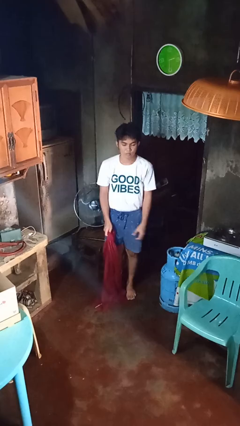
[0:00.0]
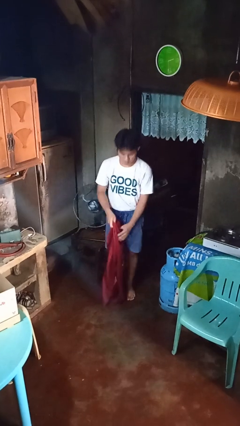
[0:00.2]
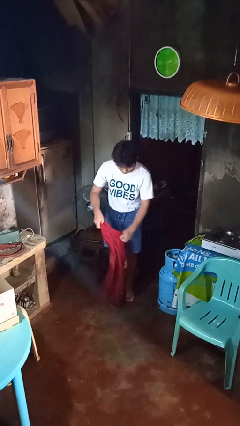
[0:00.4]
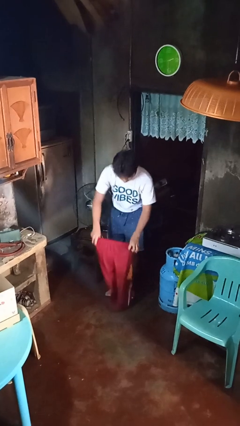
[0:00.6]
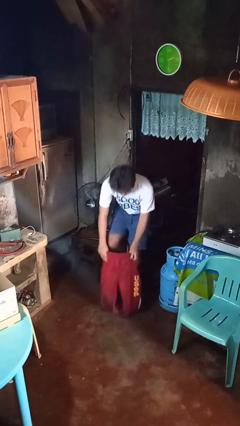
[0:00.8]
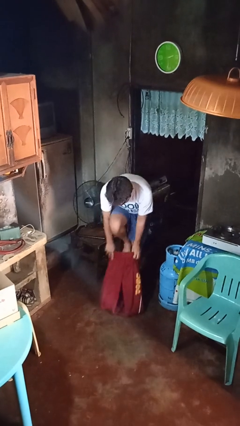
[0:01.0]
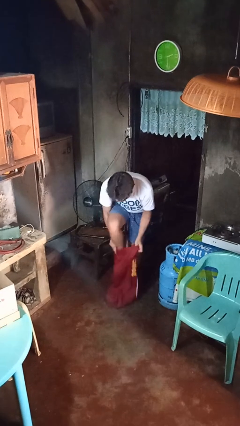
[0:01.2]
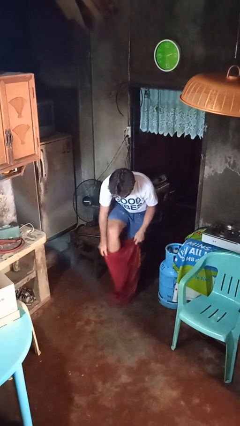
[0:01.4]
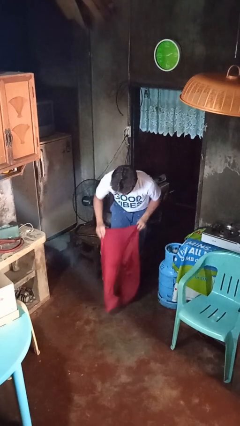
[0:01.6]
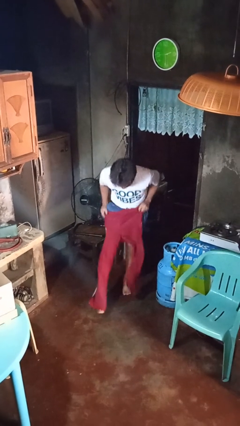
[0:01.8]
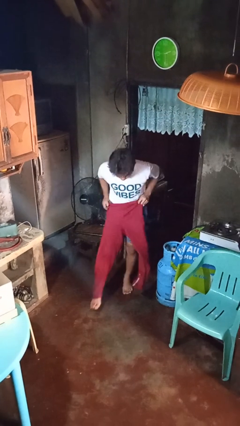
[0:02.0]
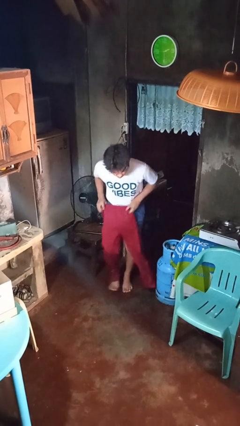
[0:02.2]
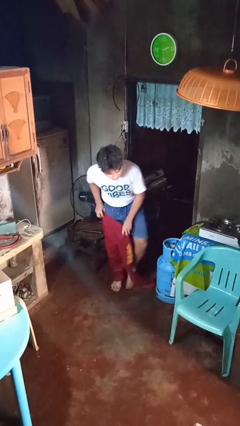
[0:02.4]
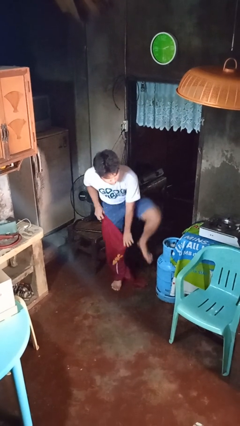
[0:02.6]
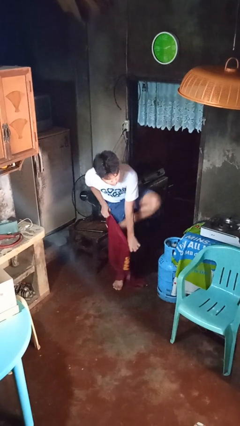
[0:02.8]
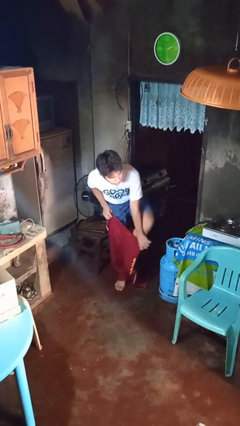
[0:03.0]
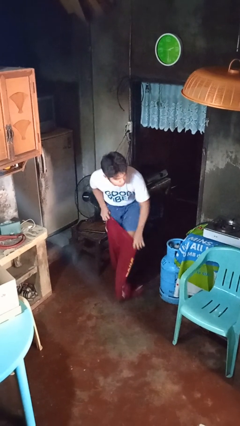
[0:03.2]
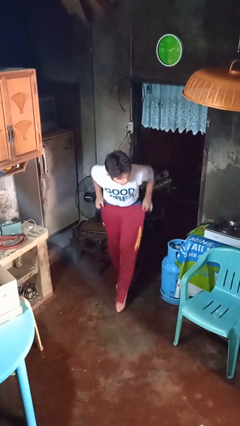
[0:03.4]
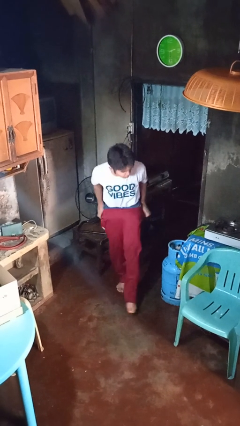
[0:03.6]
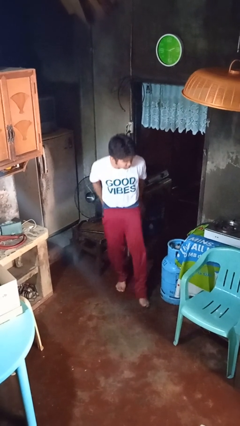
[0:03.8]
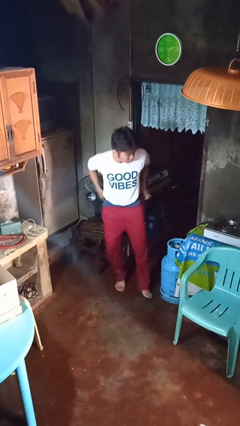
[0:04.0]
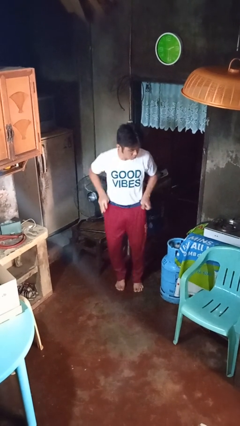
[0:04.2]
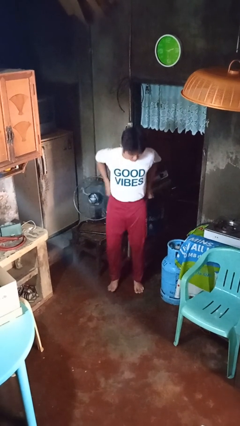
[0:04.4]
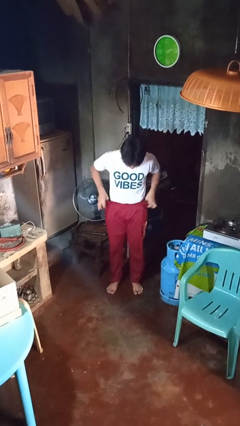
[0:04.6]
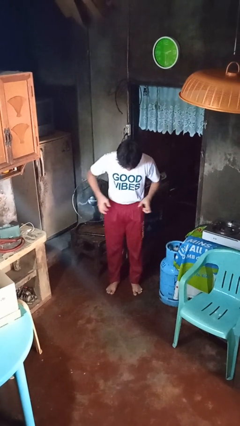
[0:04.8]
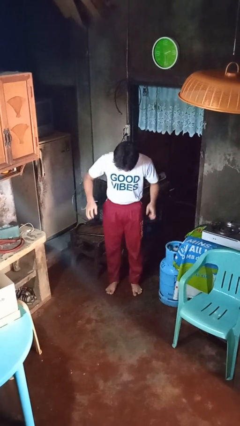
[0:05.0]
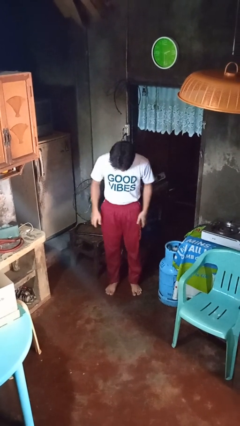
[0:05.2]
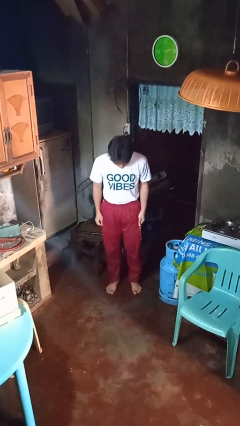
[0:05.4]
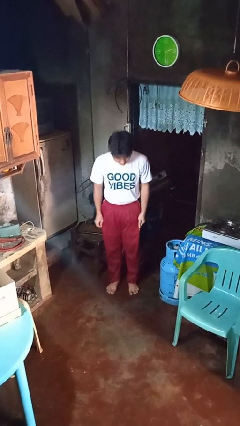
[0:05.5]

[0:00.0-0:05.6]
person puts on pants

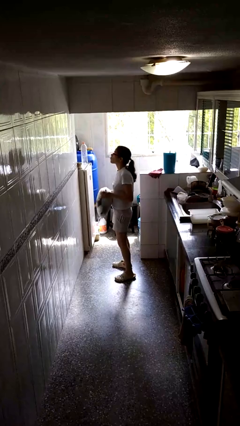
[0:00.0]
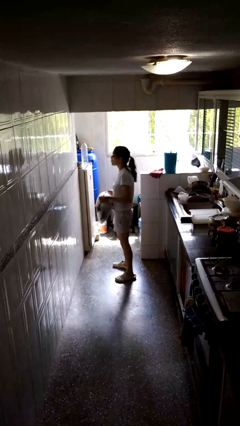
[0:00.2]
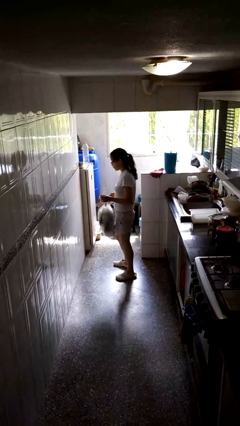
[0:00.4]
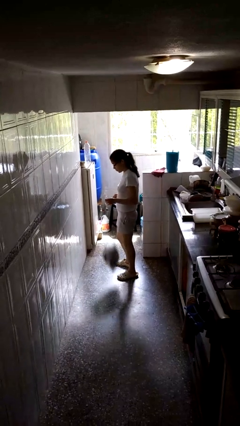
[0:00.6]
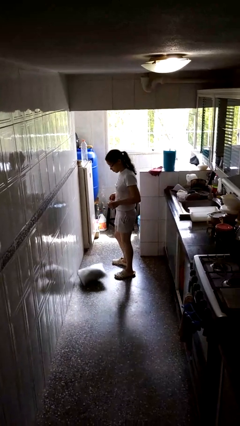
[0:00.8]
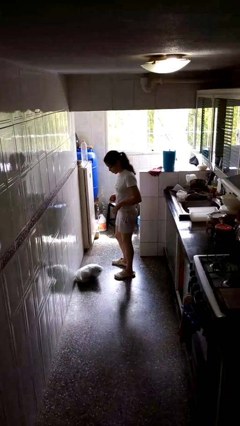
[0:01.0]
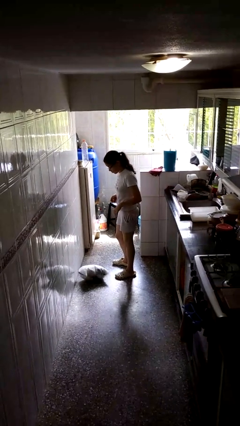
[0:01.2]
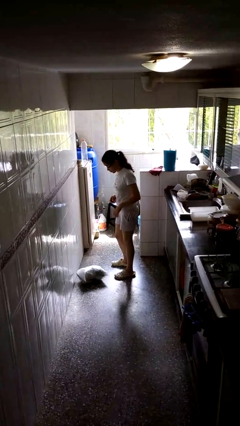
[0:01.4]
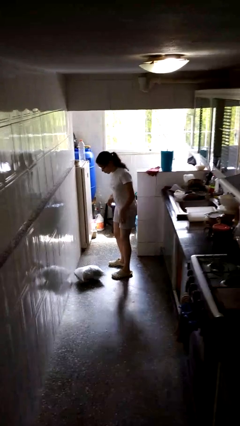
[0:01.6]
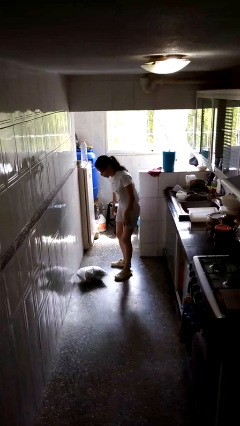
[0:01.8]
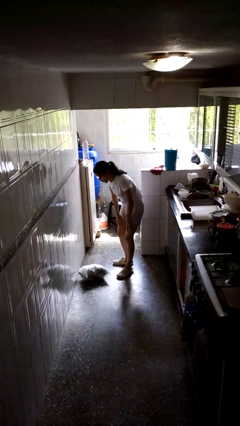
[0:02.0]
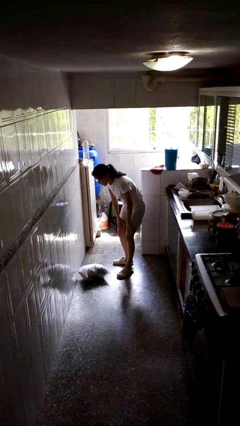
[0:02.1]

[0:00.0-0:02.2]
person drops object

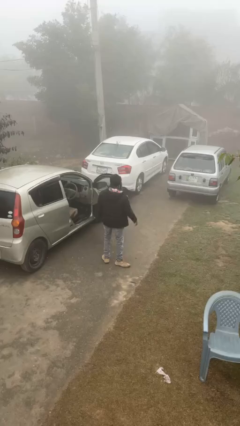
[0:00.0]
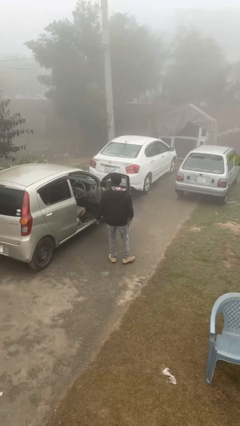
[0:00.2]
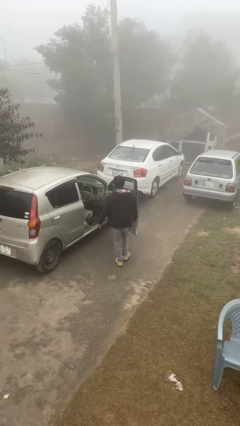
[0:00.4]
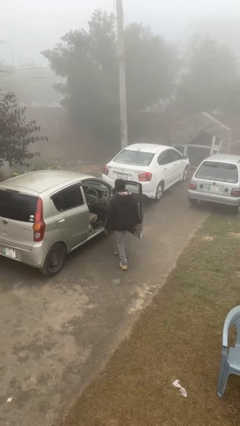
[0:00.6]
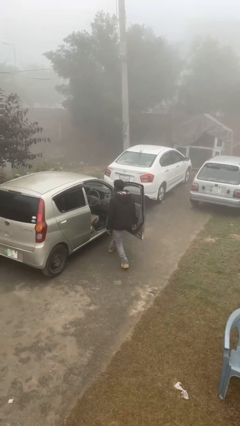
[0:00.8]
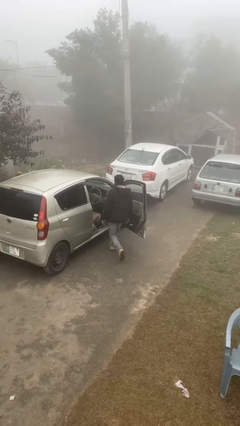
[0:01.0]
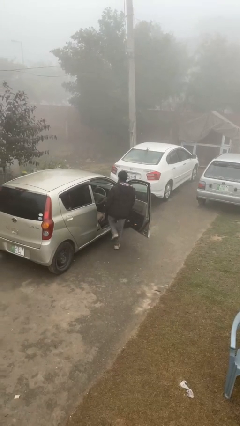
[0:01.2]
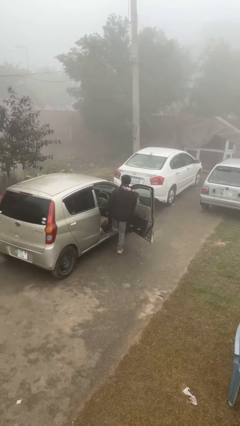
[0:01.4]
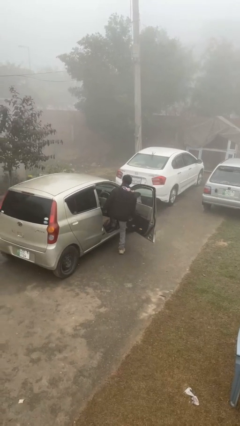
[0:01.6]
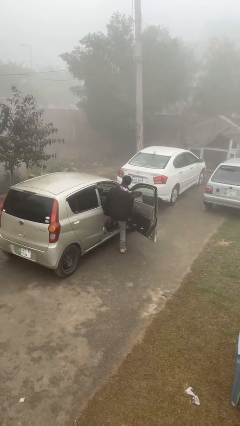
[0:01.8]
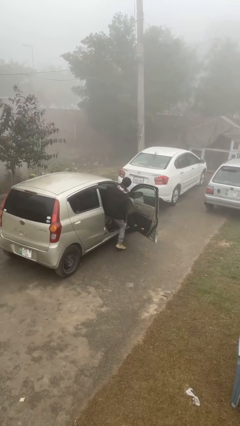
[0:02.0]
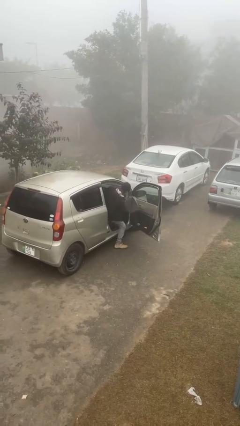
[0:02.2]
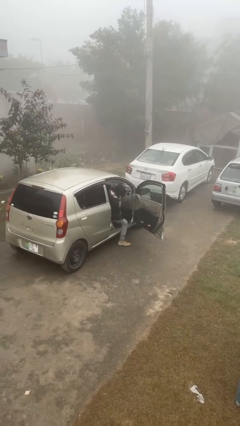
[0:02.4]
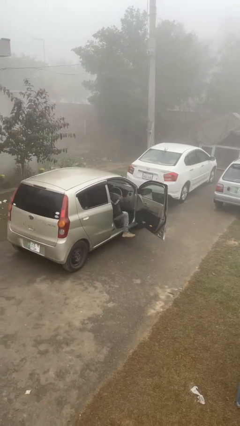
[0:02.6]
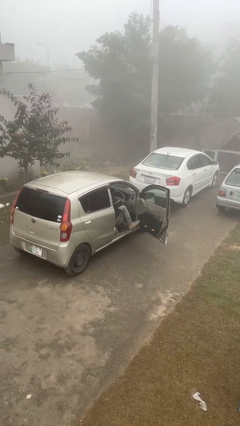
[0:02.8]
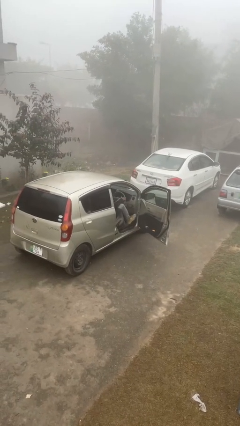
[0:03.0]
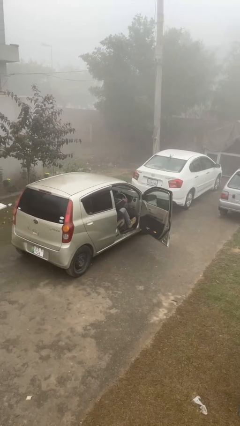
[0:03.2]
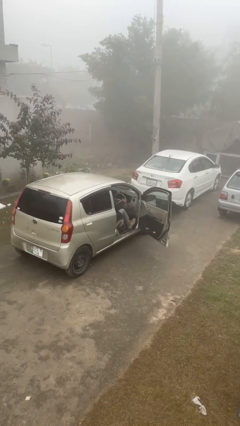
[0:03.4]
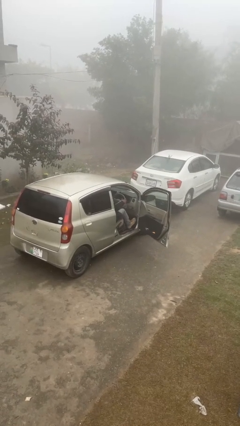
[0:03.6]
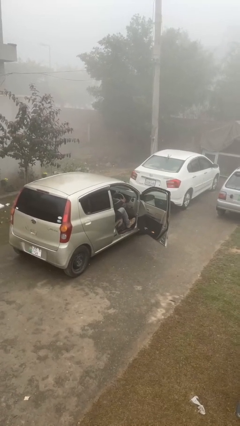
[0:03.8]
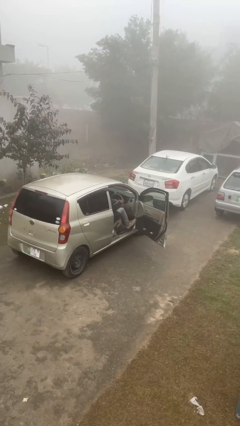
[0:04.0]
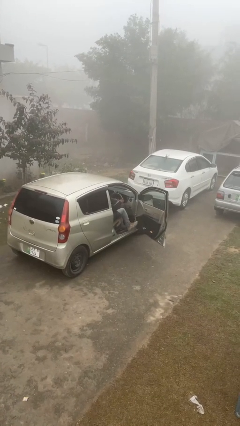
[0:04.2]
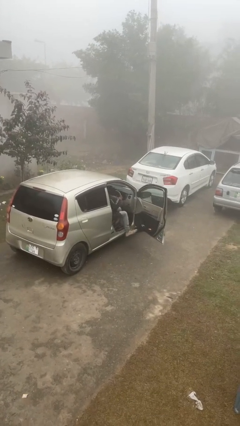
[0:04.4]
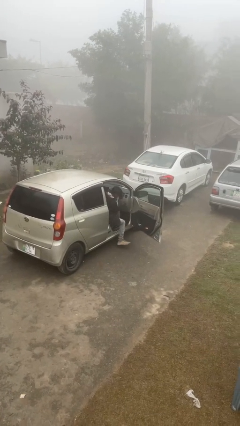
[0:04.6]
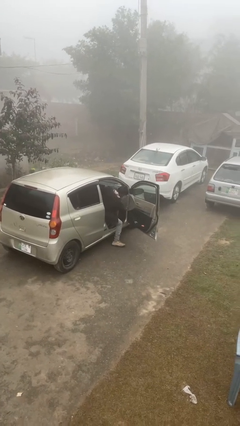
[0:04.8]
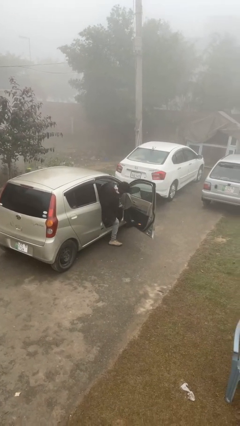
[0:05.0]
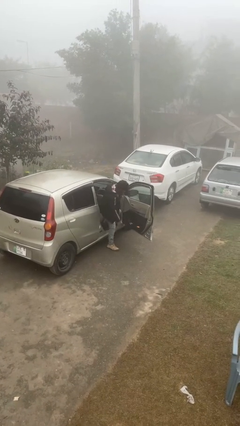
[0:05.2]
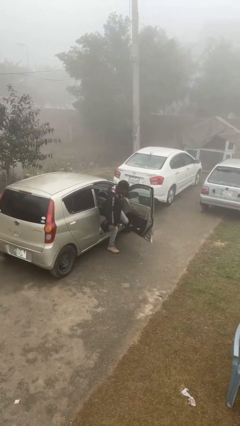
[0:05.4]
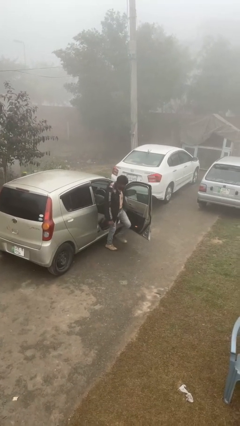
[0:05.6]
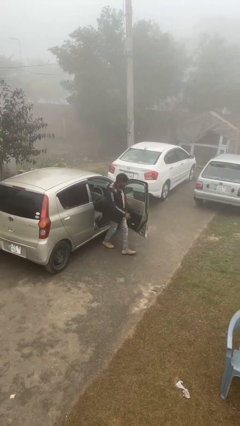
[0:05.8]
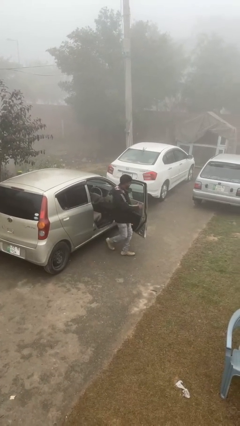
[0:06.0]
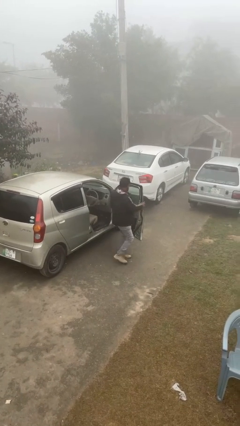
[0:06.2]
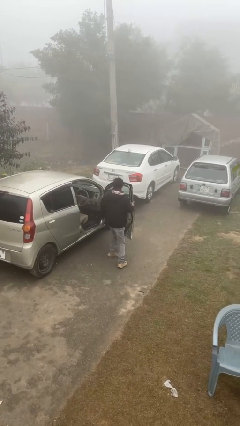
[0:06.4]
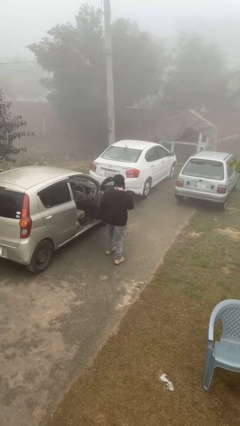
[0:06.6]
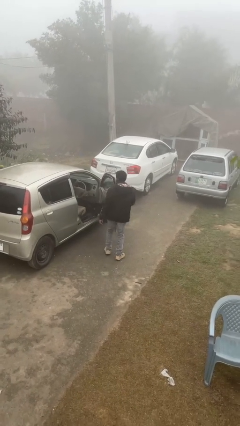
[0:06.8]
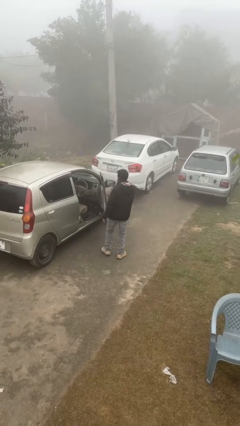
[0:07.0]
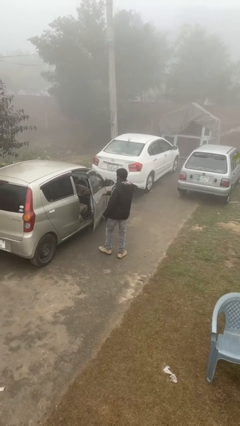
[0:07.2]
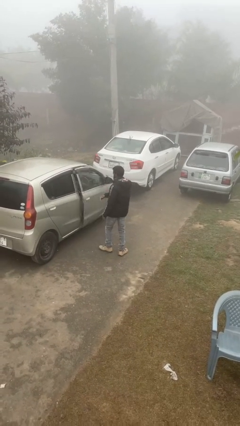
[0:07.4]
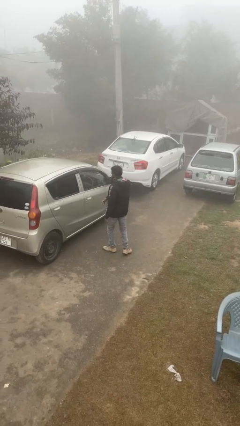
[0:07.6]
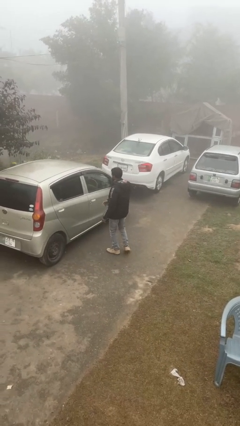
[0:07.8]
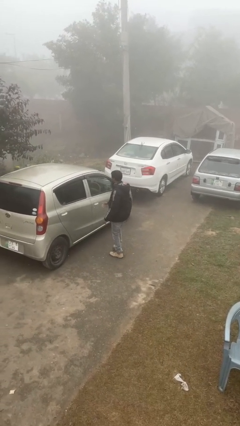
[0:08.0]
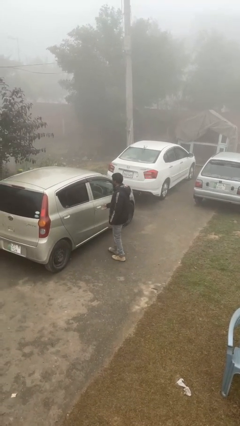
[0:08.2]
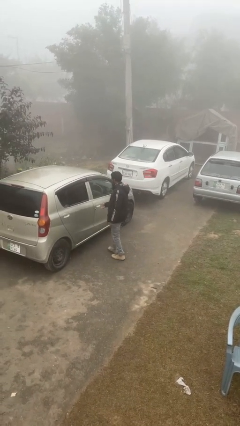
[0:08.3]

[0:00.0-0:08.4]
person enters car

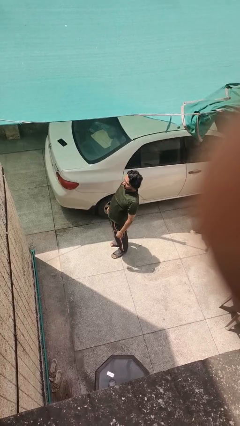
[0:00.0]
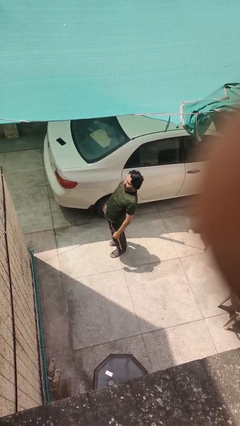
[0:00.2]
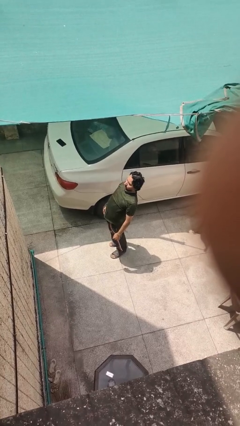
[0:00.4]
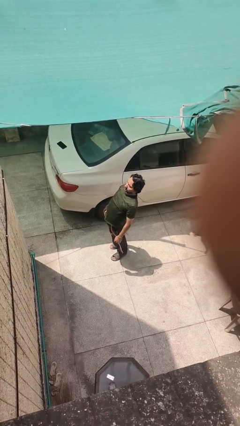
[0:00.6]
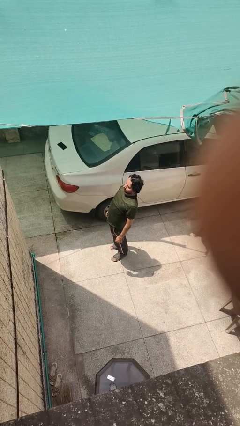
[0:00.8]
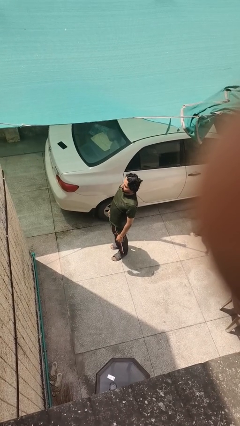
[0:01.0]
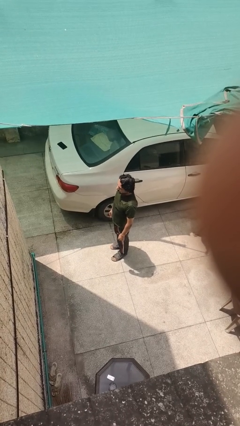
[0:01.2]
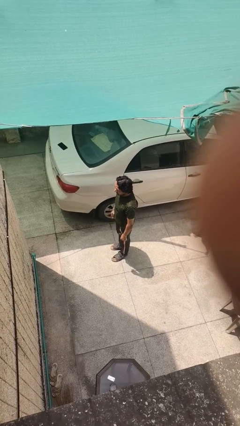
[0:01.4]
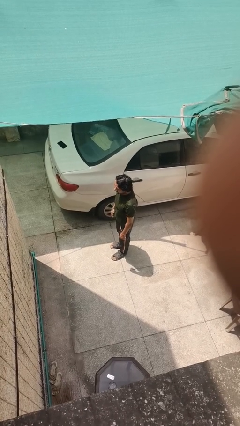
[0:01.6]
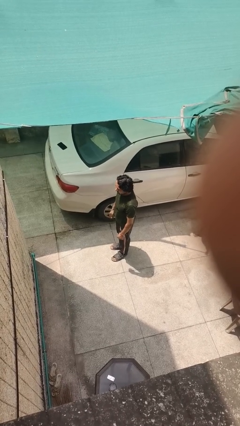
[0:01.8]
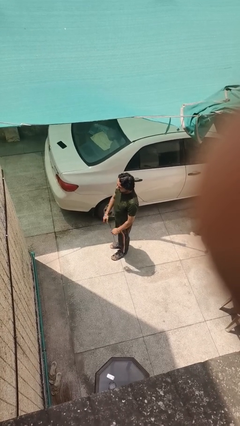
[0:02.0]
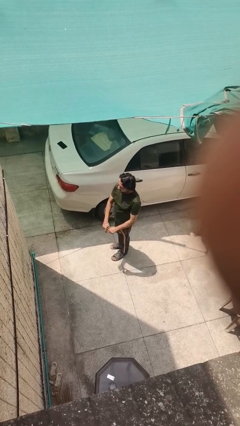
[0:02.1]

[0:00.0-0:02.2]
person stretches back
